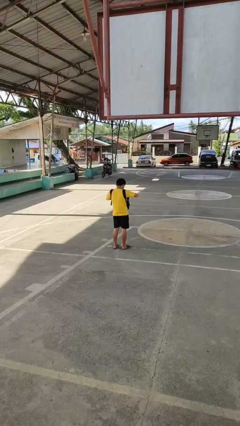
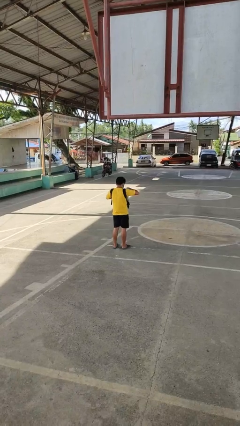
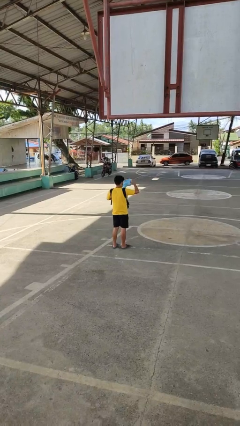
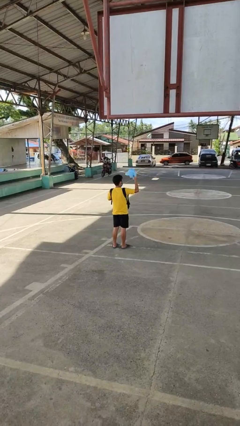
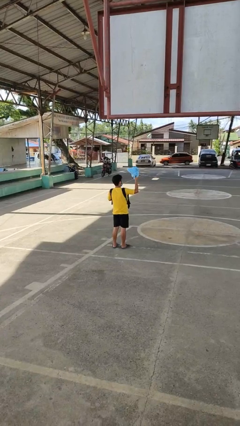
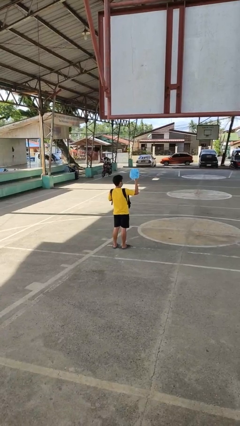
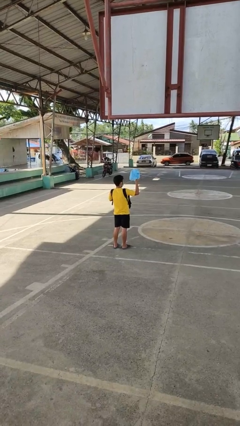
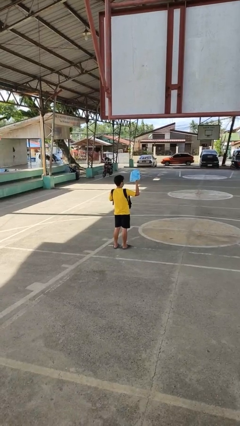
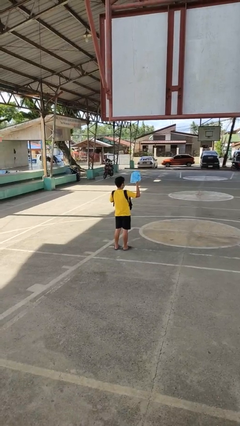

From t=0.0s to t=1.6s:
person takes object from backpack

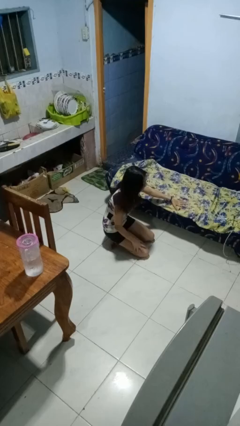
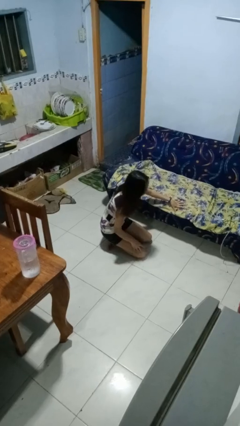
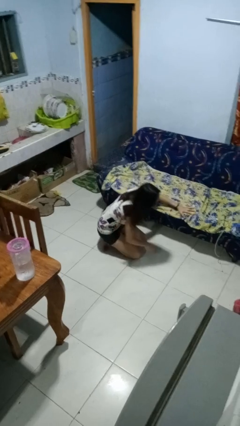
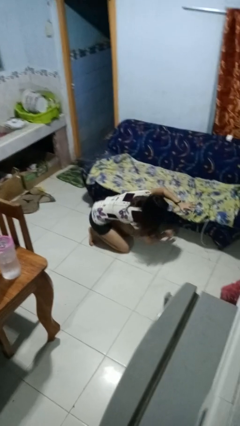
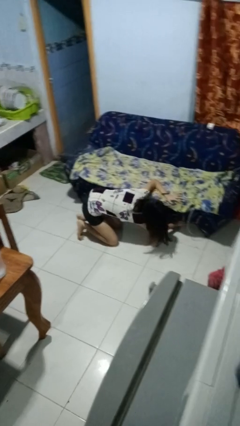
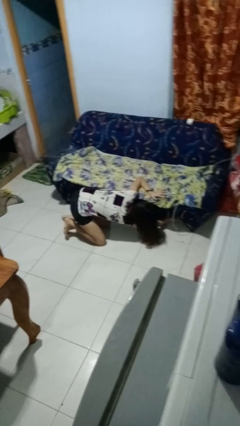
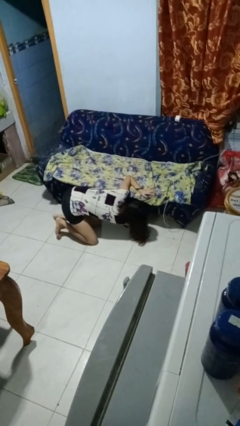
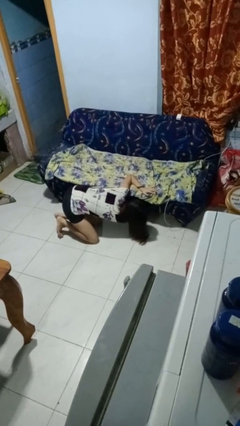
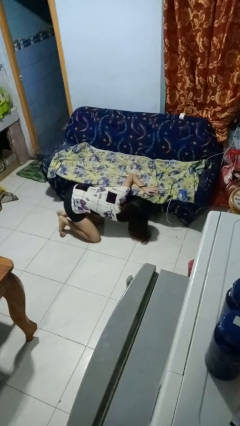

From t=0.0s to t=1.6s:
person searches under couch

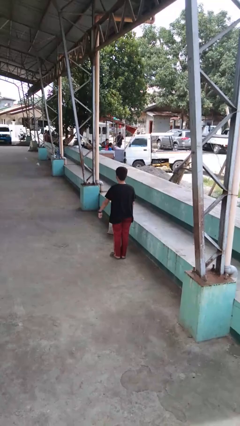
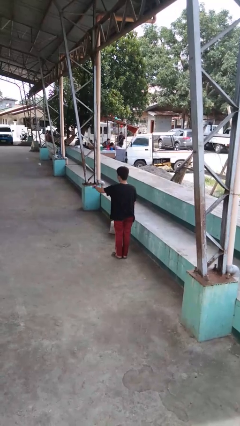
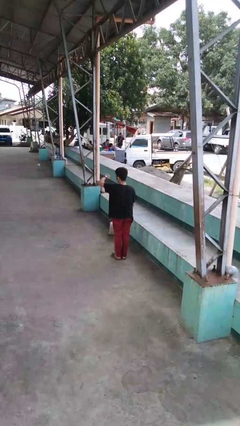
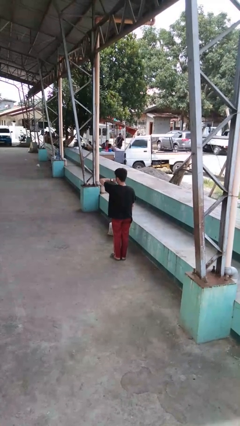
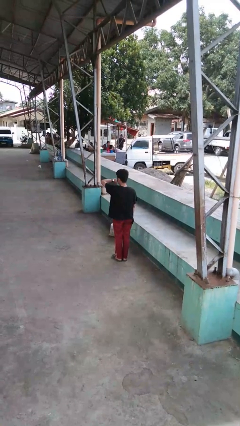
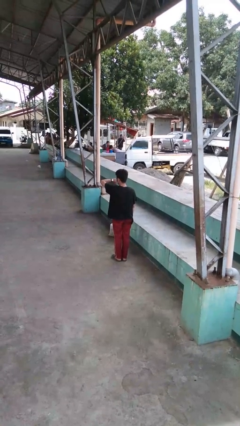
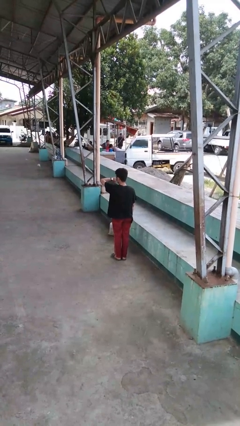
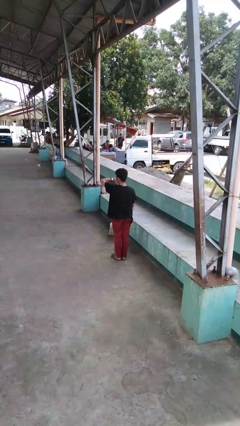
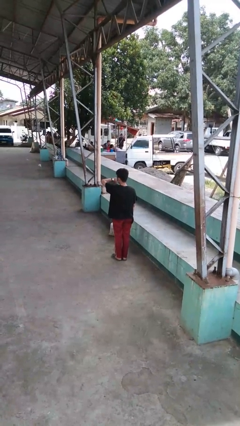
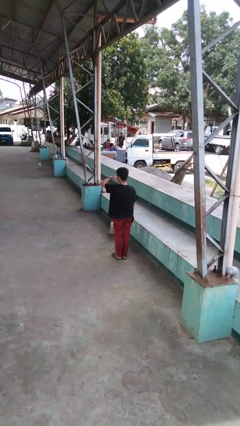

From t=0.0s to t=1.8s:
person looks at wristwatch

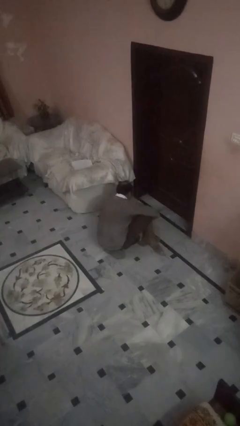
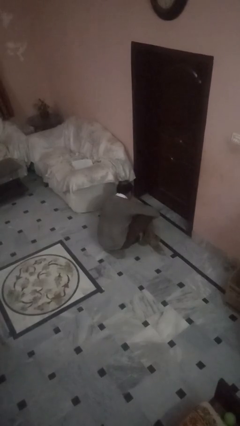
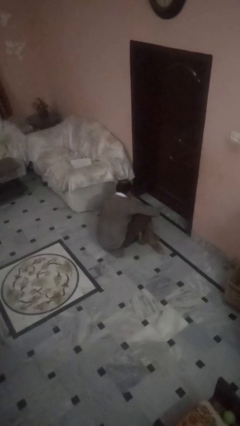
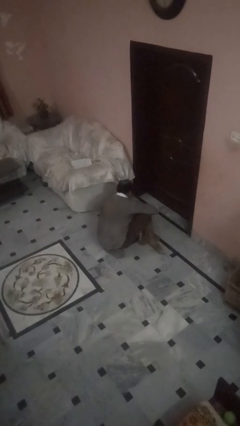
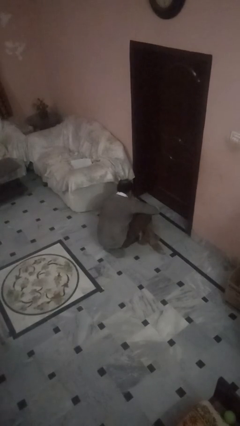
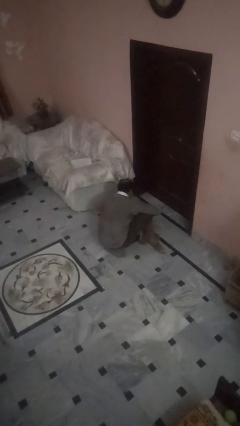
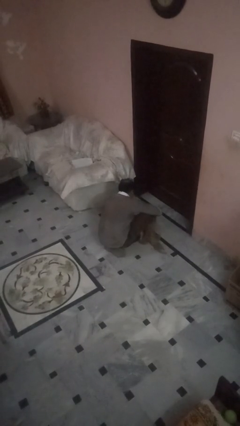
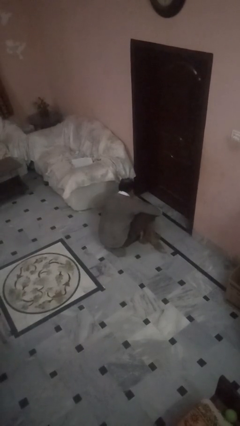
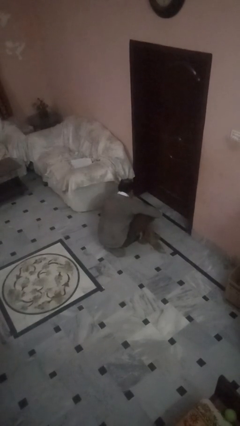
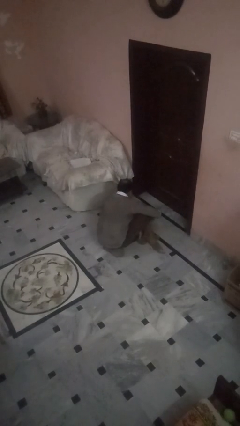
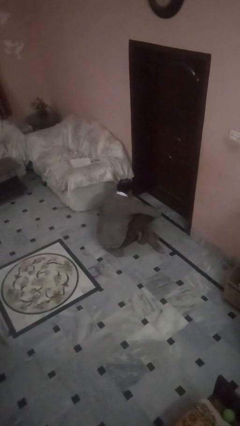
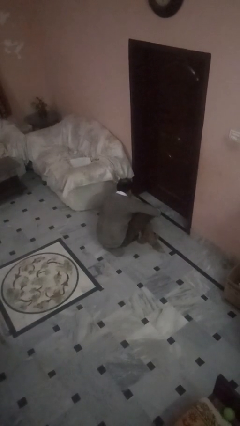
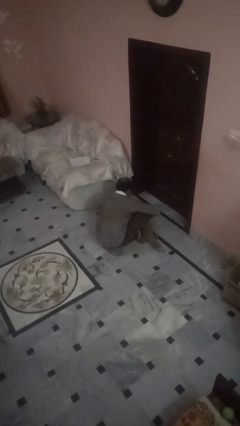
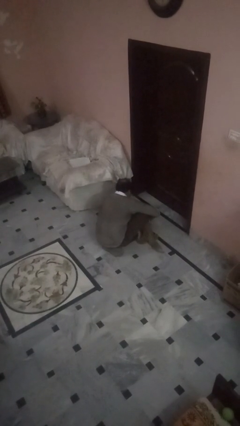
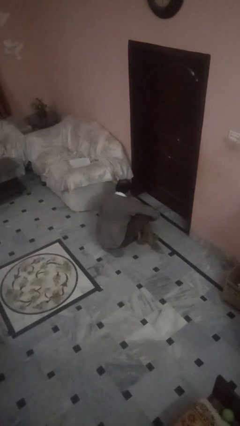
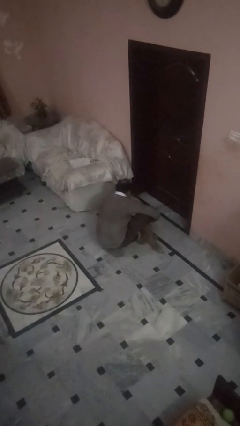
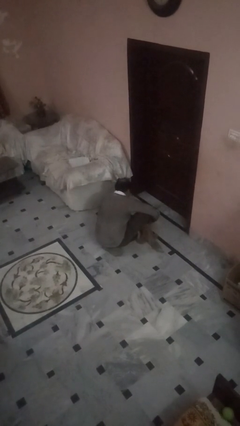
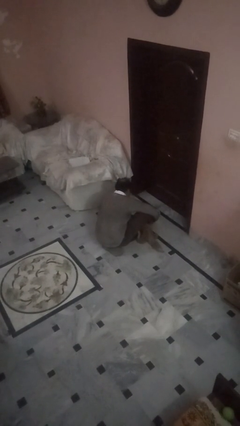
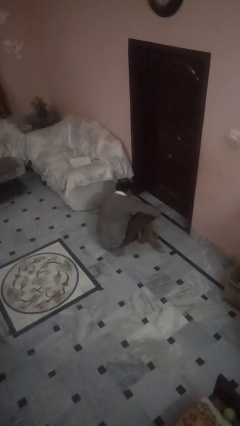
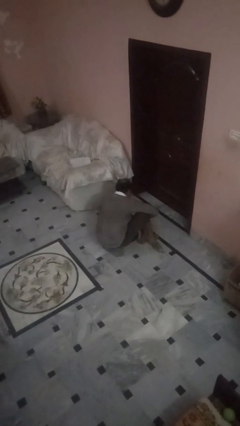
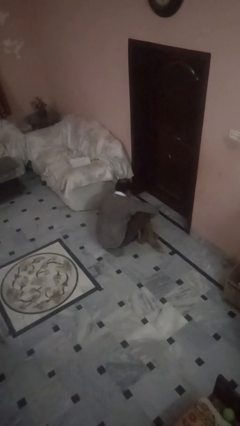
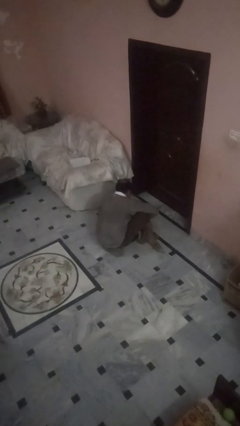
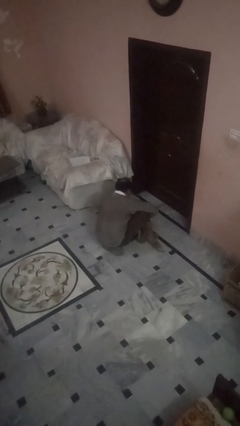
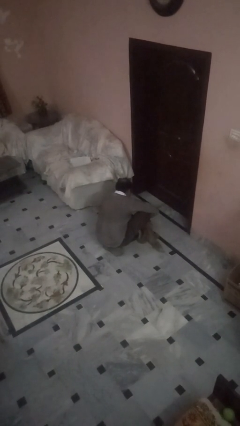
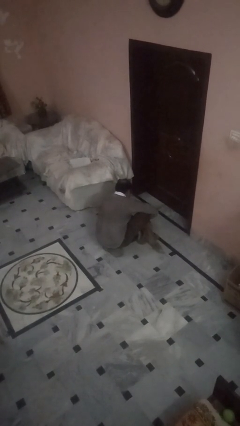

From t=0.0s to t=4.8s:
person attaches leash to dog

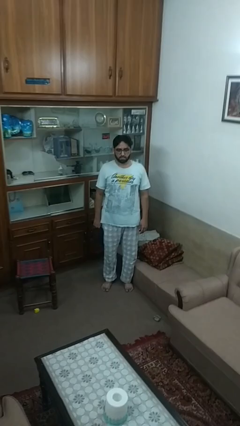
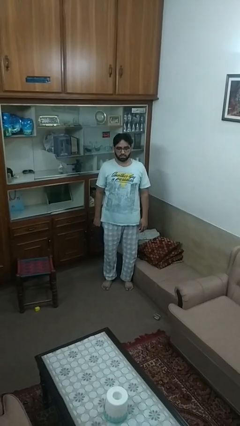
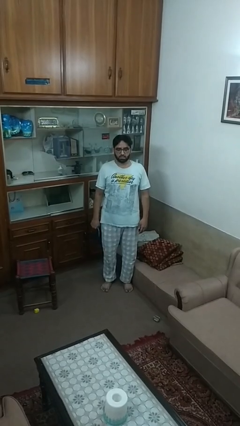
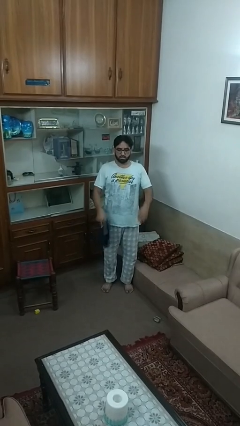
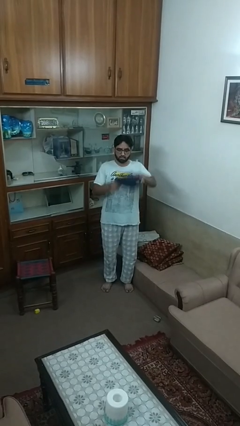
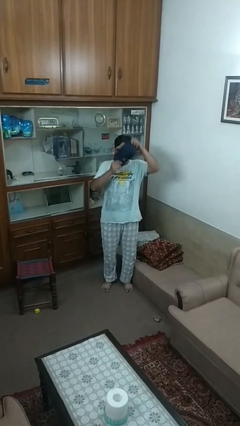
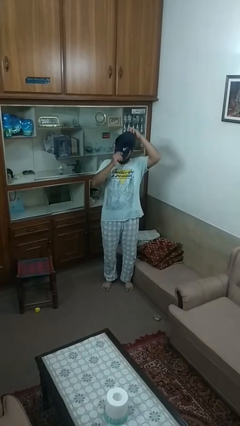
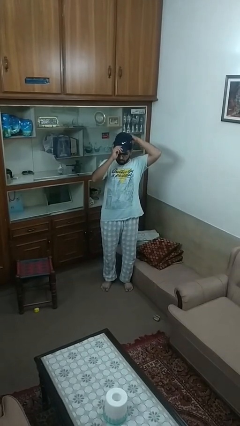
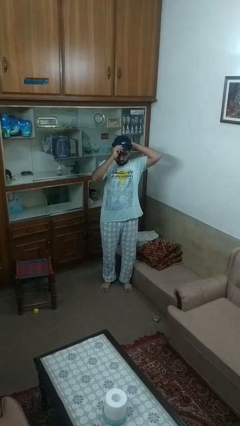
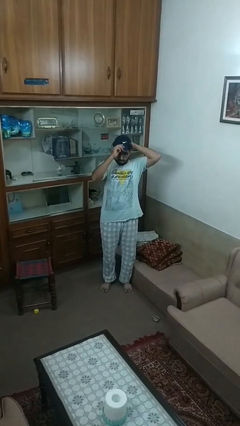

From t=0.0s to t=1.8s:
person puts on hat

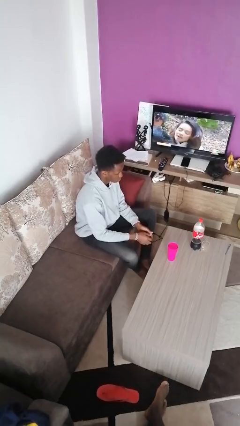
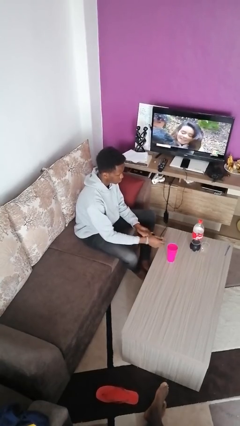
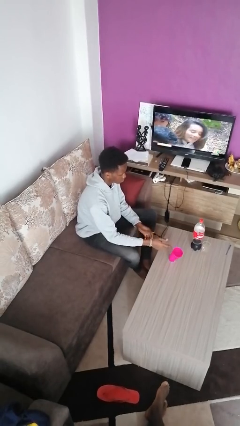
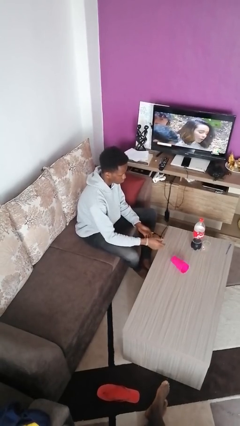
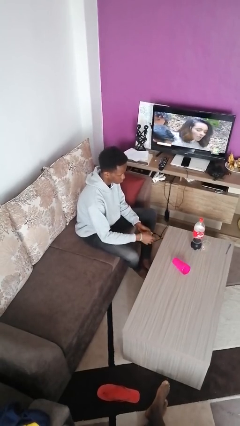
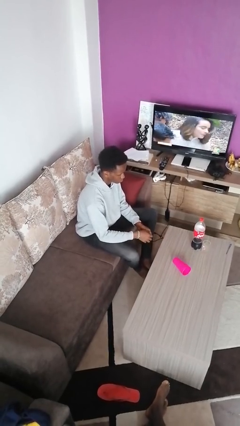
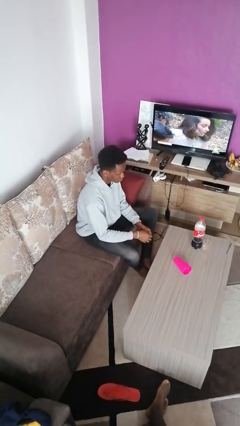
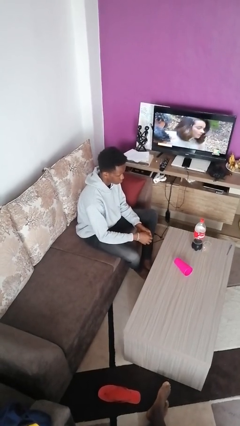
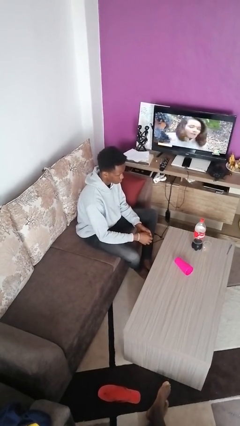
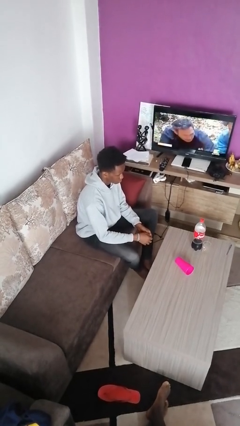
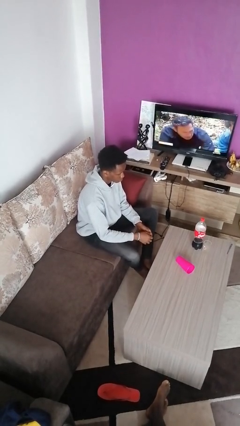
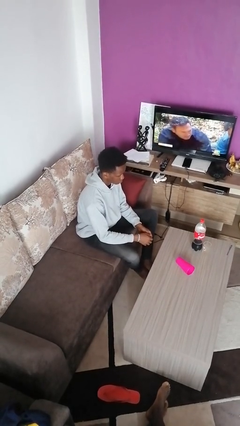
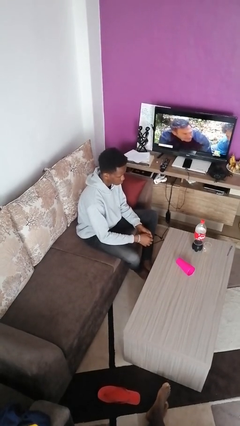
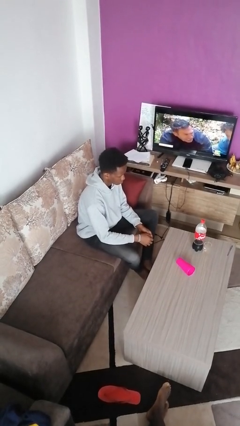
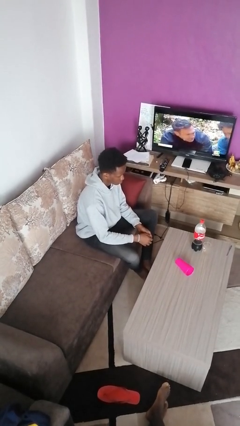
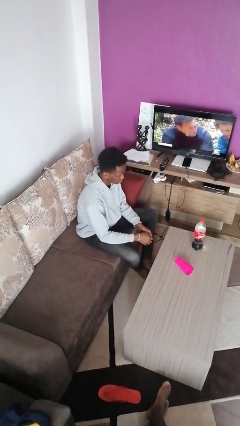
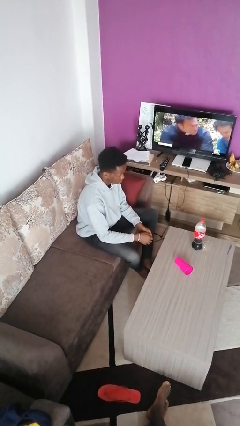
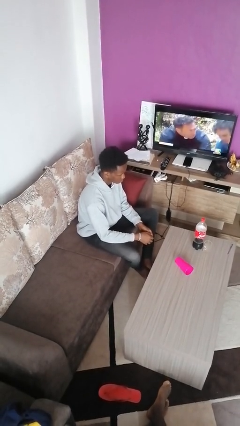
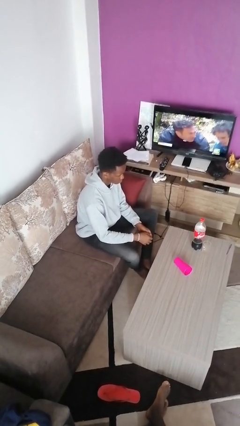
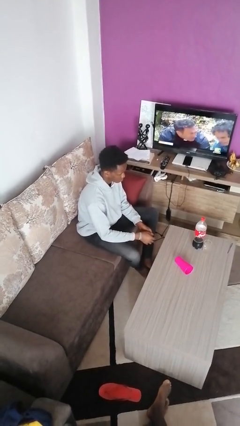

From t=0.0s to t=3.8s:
person knocks over glass

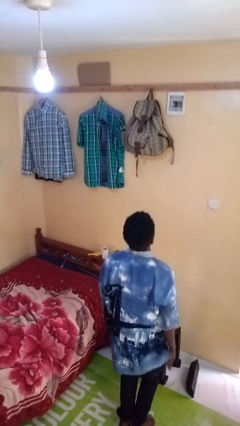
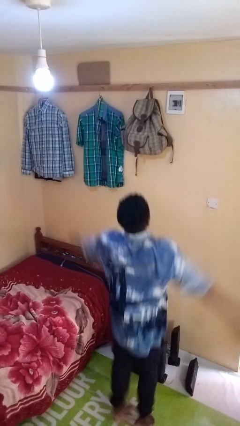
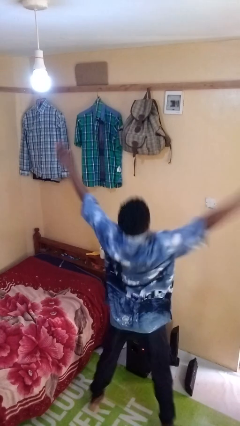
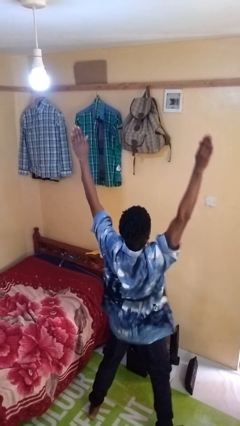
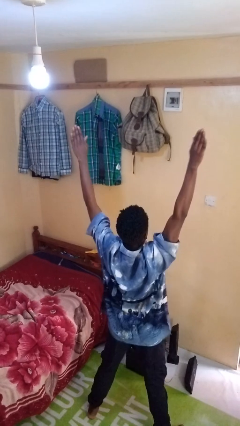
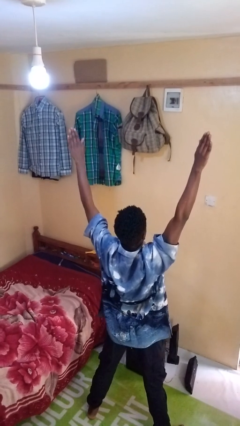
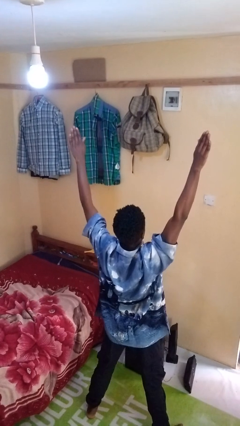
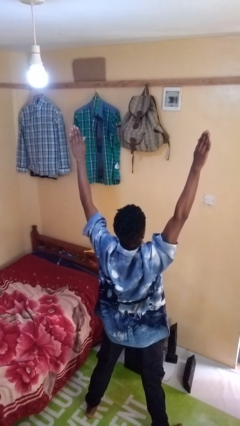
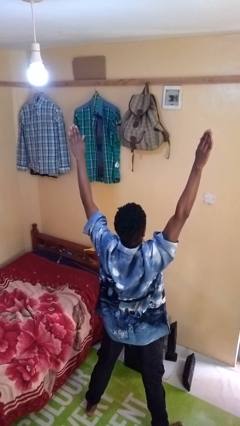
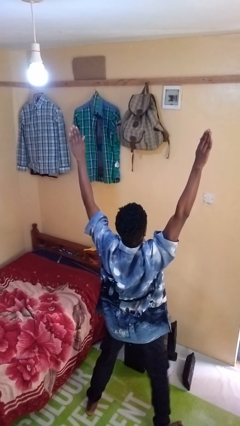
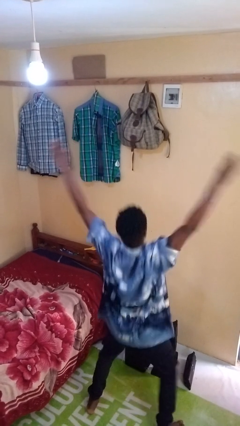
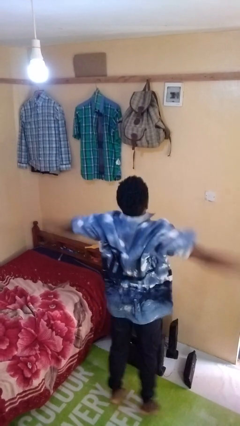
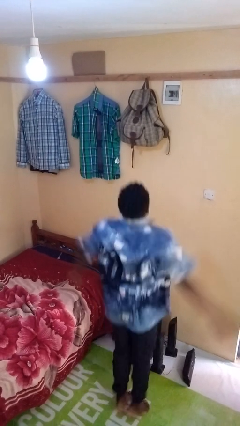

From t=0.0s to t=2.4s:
person exercises with jumping jacks
